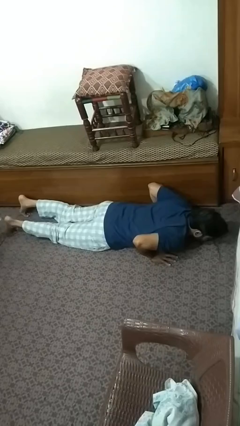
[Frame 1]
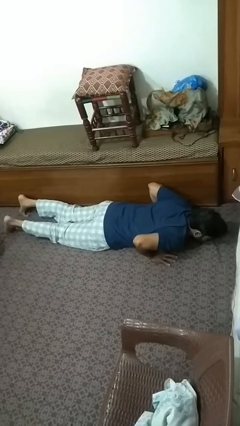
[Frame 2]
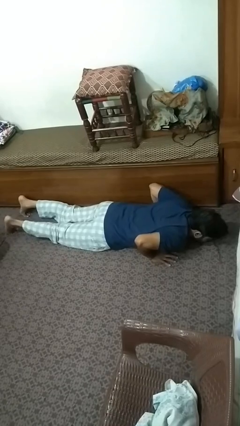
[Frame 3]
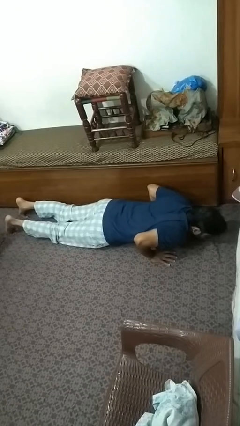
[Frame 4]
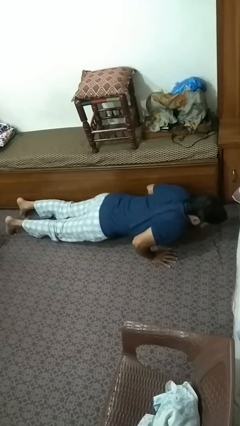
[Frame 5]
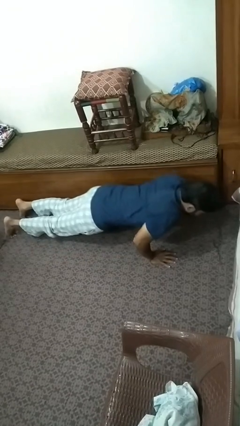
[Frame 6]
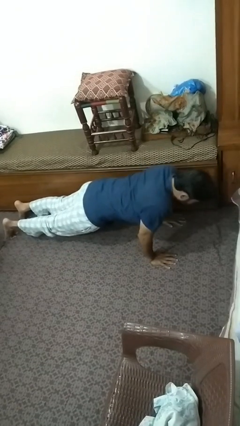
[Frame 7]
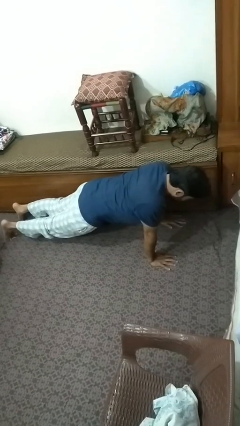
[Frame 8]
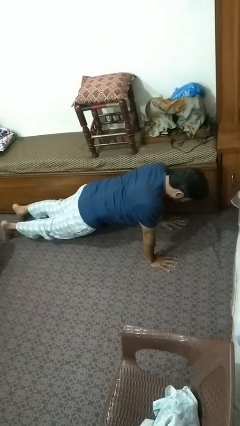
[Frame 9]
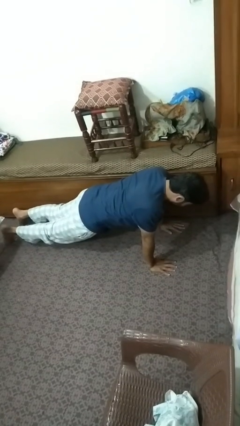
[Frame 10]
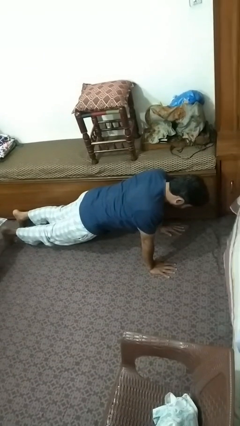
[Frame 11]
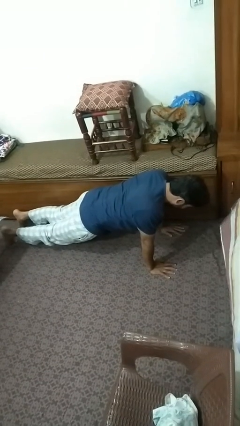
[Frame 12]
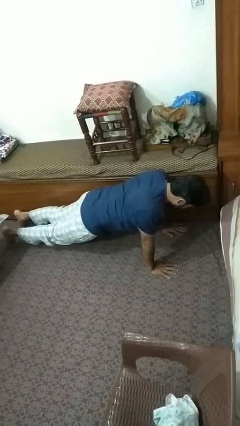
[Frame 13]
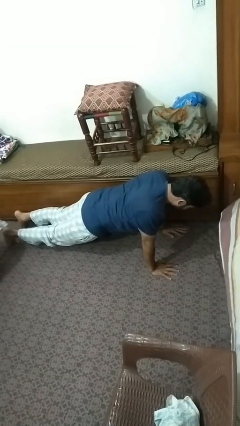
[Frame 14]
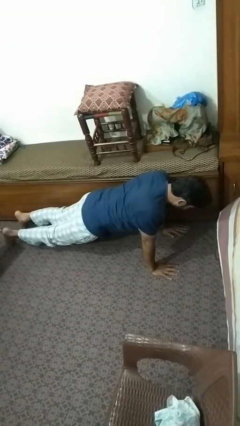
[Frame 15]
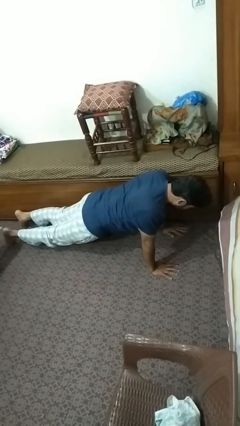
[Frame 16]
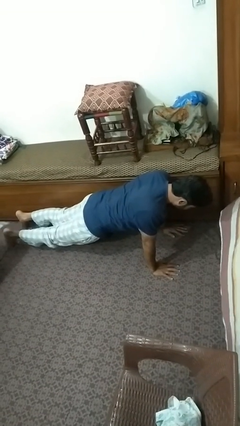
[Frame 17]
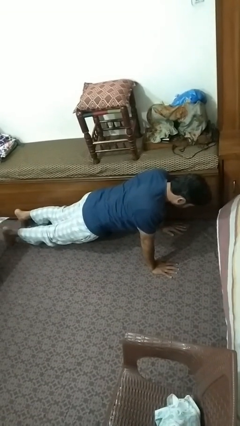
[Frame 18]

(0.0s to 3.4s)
person exercises with pushup

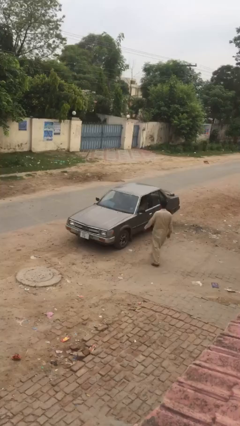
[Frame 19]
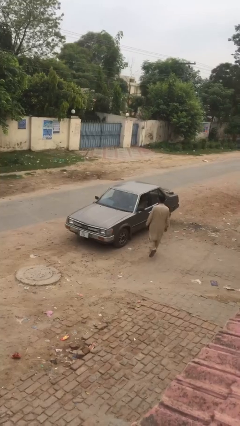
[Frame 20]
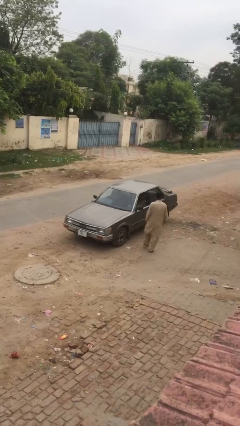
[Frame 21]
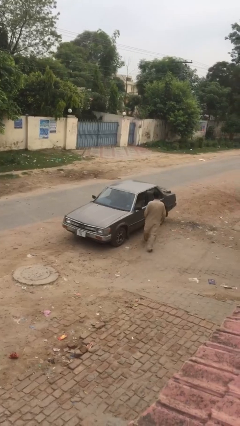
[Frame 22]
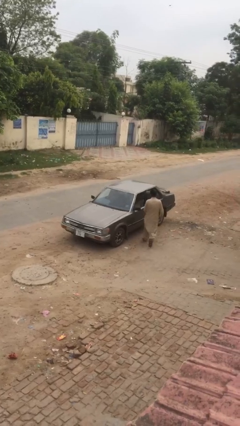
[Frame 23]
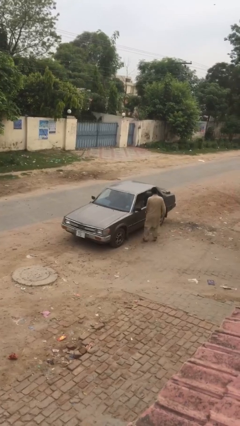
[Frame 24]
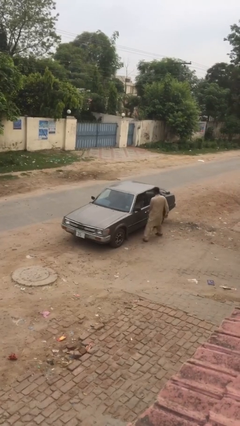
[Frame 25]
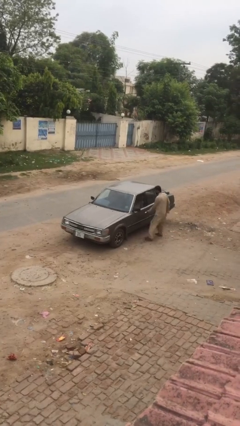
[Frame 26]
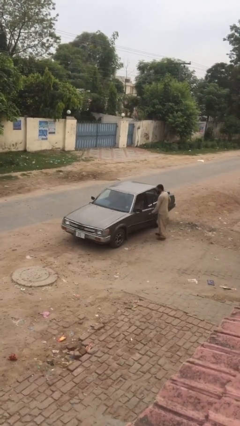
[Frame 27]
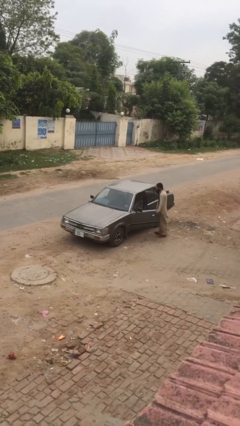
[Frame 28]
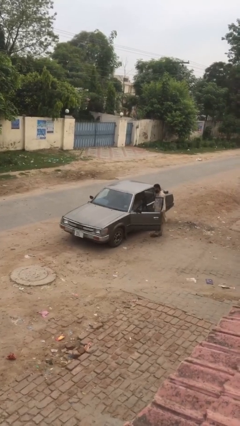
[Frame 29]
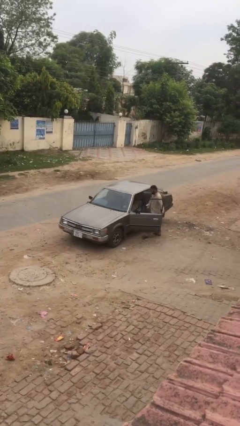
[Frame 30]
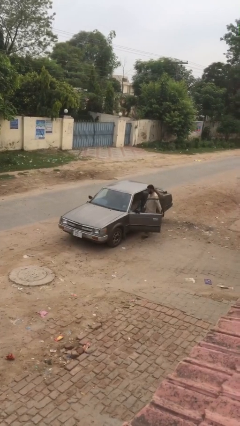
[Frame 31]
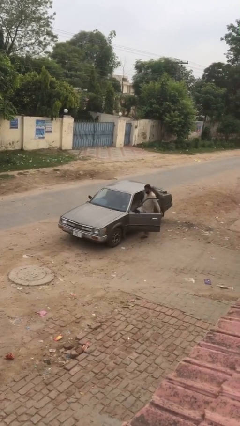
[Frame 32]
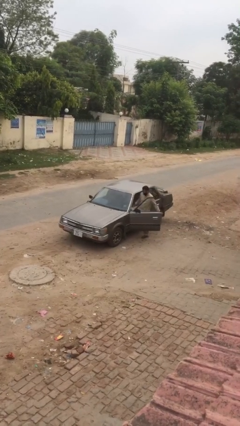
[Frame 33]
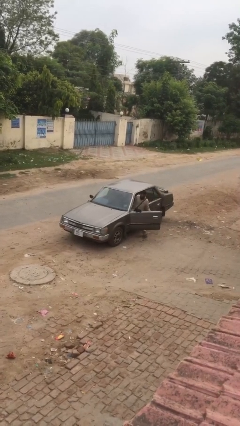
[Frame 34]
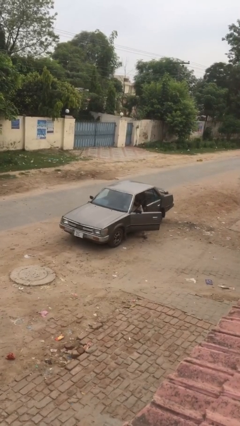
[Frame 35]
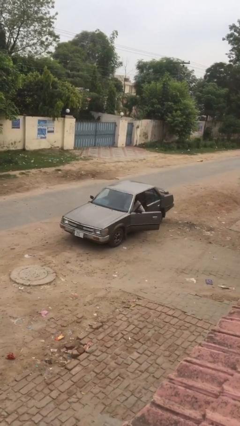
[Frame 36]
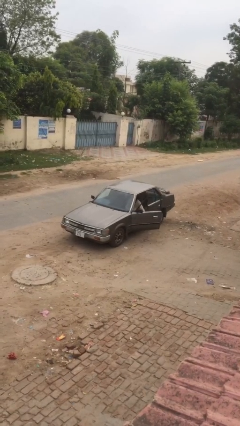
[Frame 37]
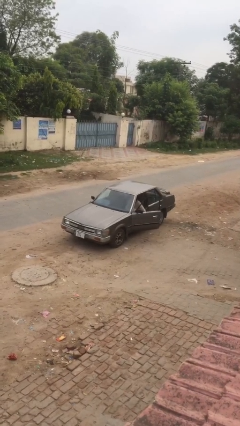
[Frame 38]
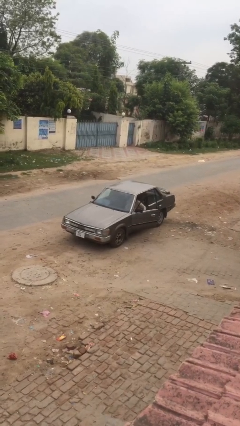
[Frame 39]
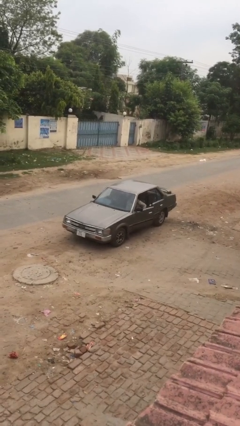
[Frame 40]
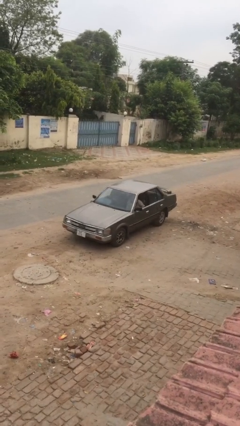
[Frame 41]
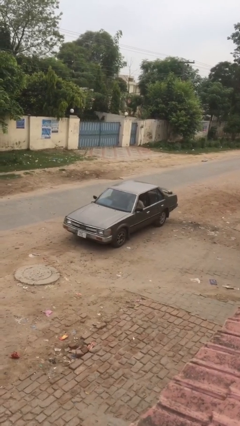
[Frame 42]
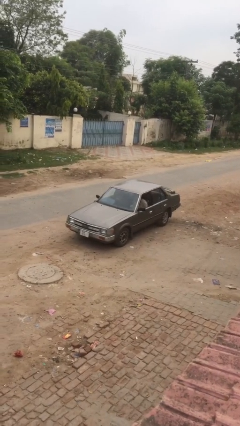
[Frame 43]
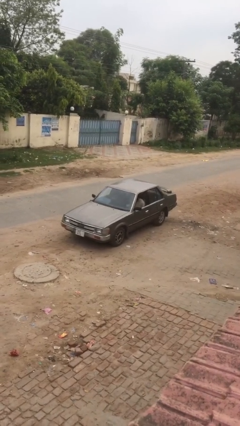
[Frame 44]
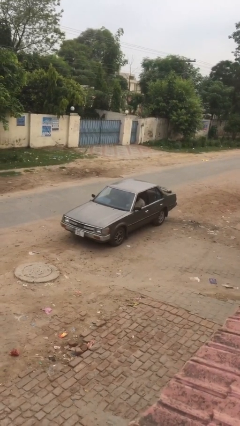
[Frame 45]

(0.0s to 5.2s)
car picks up person

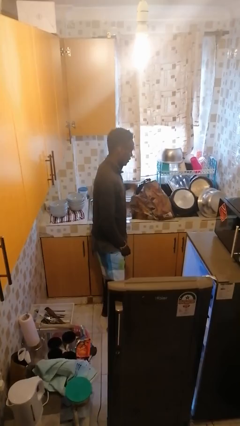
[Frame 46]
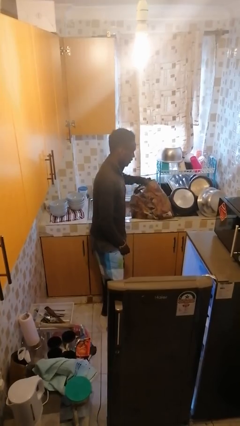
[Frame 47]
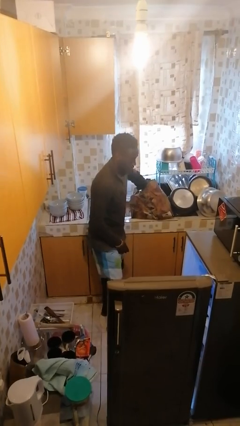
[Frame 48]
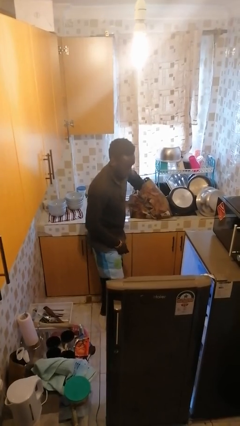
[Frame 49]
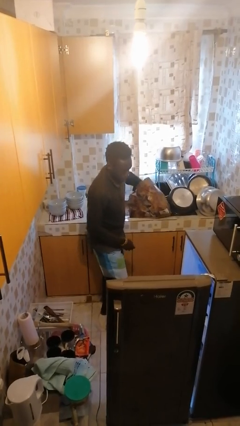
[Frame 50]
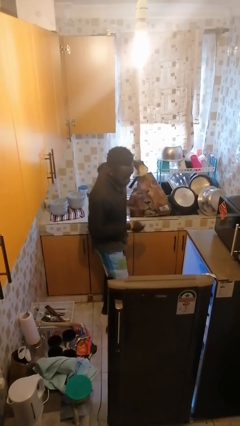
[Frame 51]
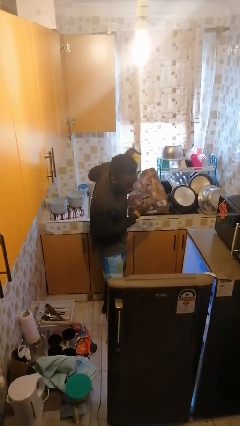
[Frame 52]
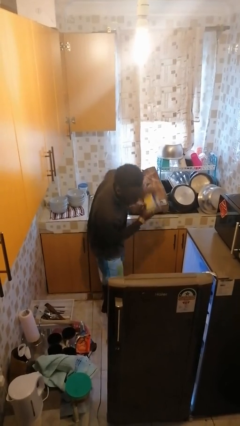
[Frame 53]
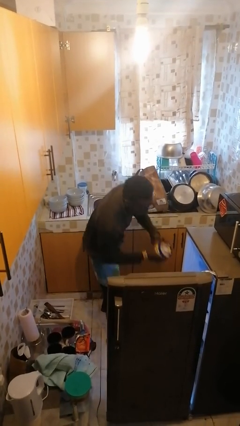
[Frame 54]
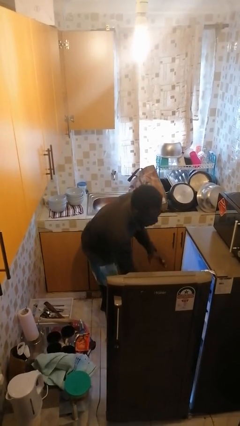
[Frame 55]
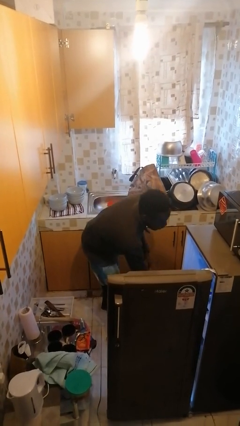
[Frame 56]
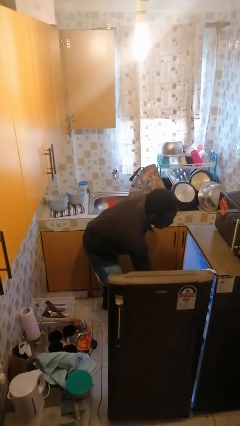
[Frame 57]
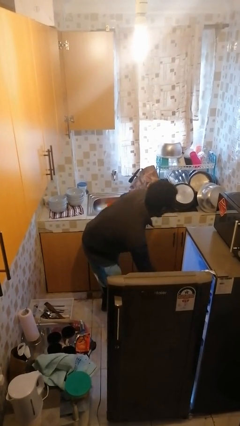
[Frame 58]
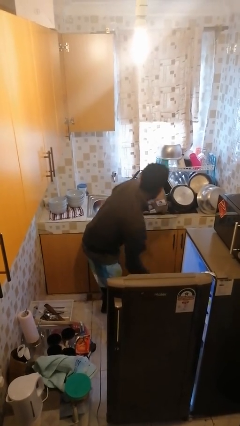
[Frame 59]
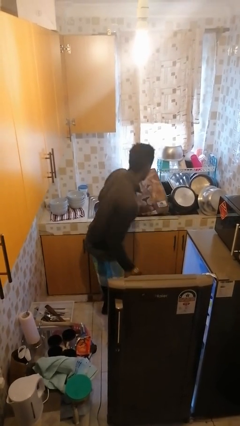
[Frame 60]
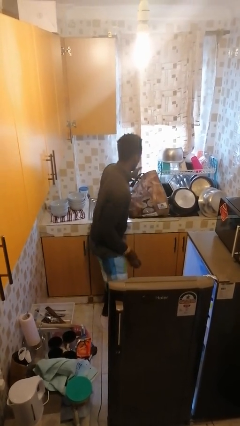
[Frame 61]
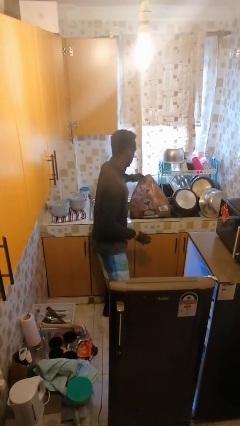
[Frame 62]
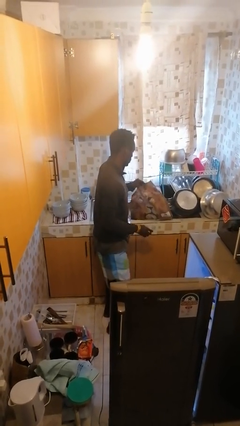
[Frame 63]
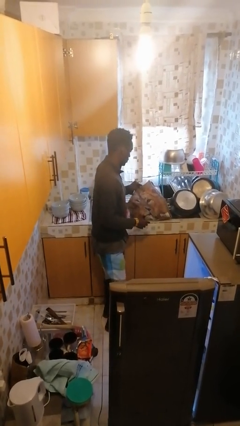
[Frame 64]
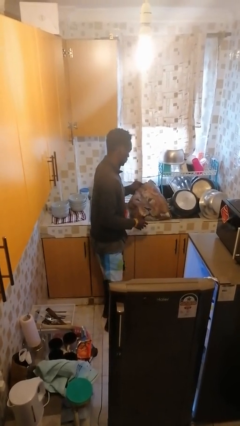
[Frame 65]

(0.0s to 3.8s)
person loads groceries into refrigerator

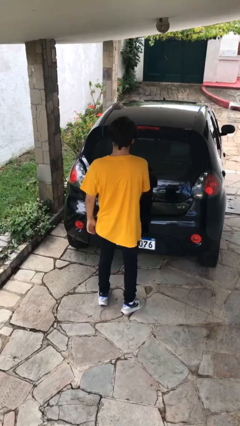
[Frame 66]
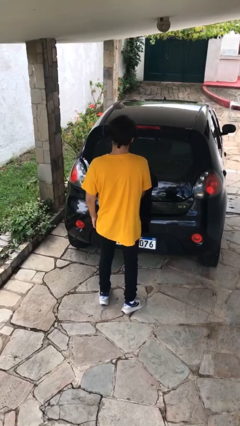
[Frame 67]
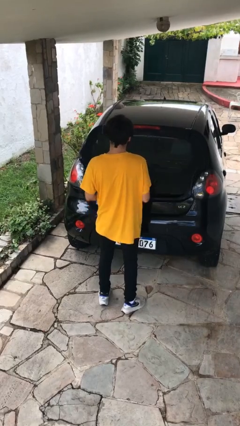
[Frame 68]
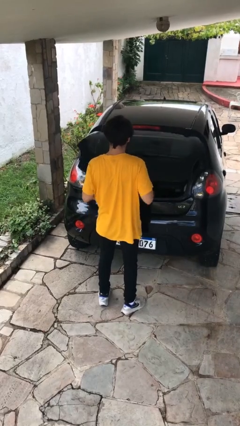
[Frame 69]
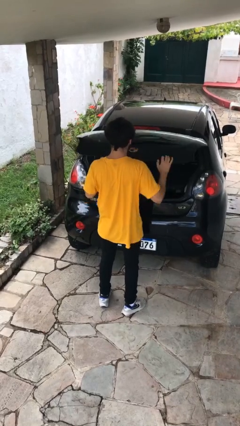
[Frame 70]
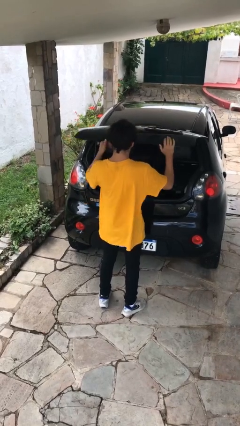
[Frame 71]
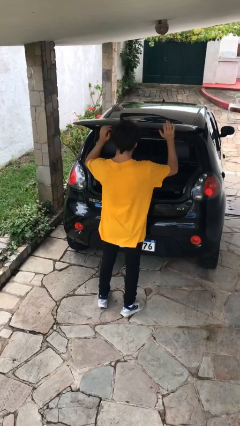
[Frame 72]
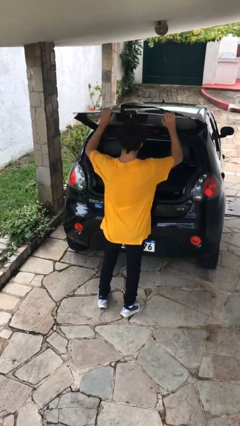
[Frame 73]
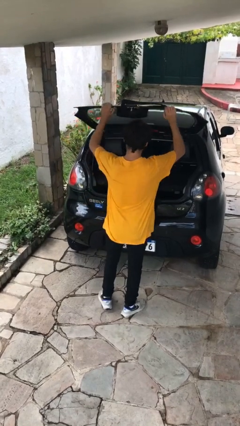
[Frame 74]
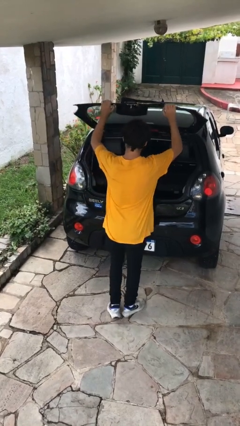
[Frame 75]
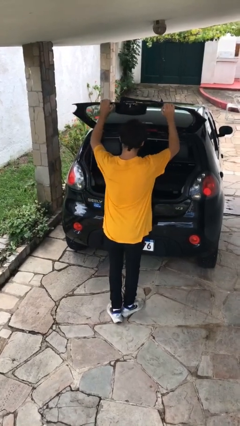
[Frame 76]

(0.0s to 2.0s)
person opens car trunk

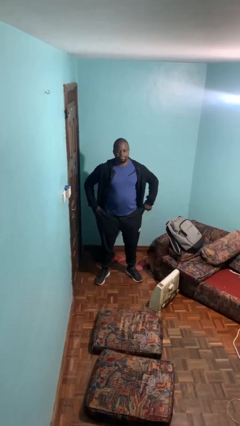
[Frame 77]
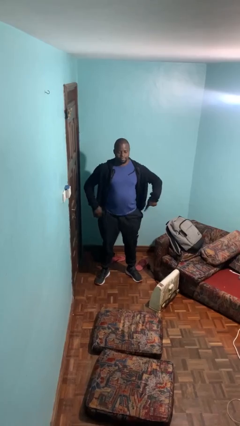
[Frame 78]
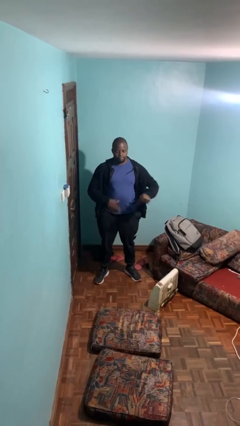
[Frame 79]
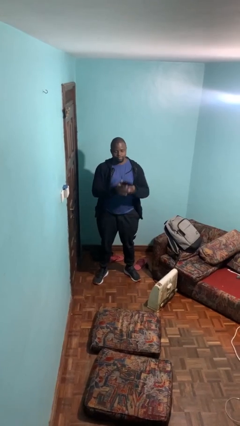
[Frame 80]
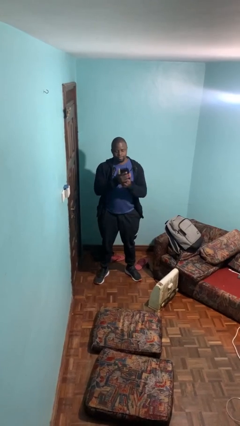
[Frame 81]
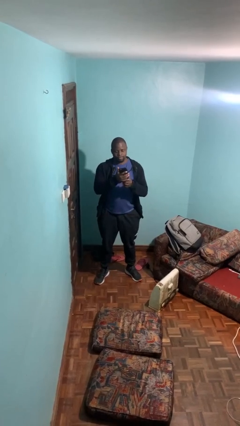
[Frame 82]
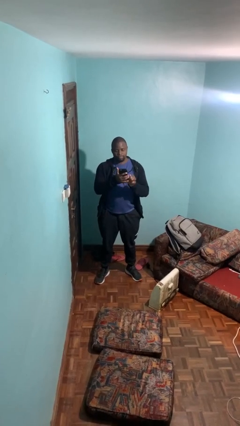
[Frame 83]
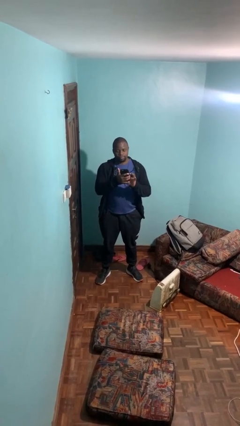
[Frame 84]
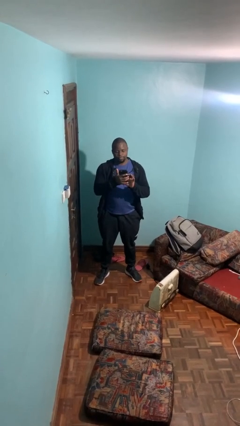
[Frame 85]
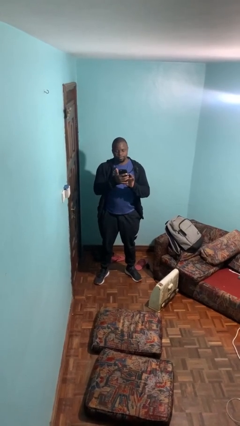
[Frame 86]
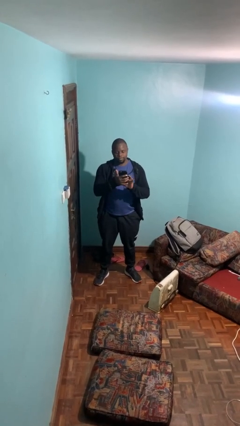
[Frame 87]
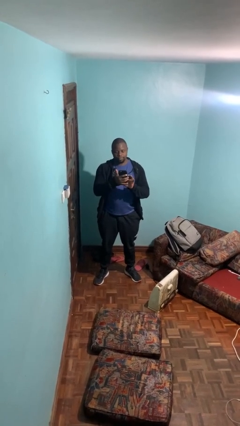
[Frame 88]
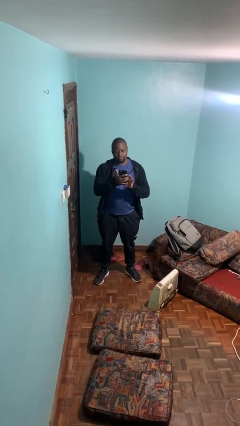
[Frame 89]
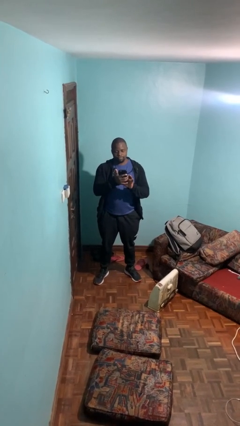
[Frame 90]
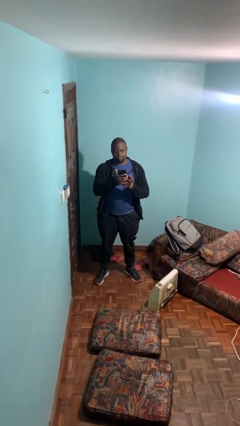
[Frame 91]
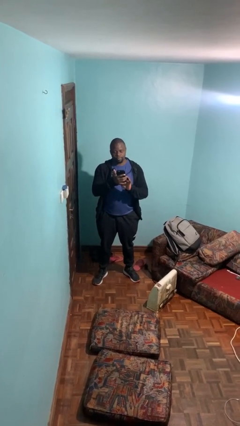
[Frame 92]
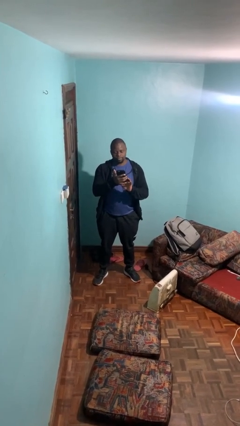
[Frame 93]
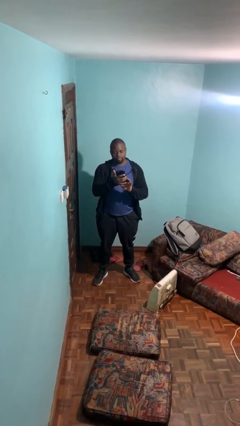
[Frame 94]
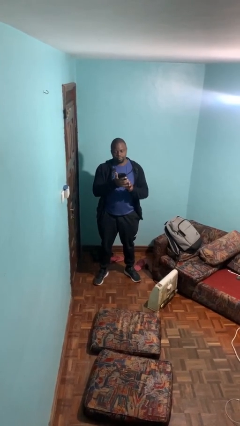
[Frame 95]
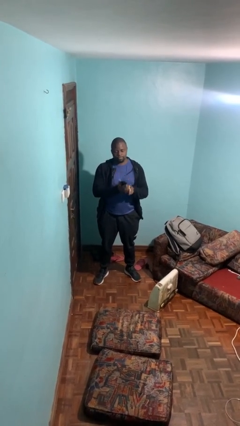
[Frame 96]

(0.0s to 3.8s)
person takes phone from pocket
